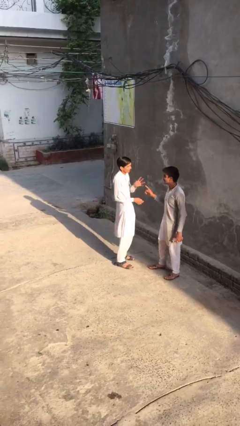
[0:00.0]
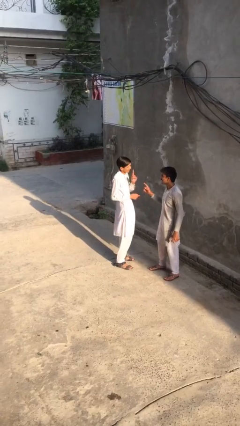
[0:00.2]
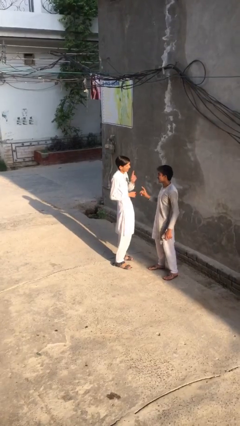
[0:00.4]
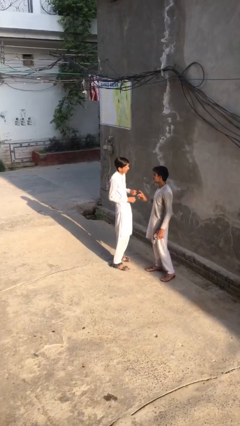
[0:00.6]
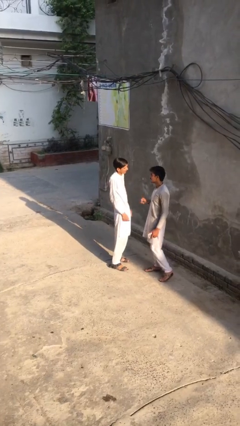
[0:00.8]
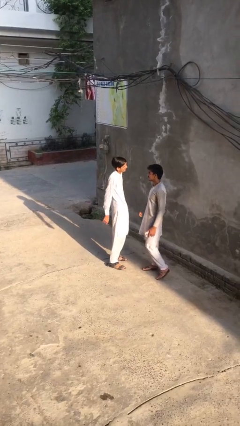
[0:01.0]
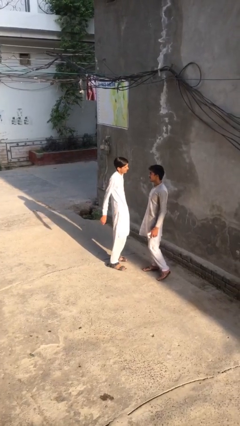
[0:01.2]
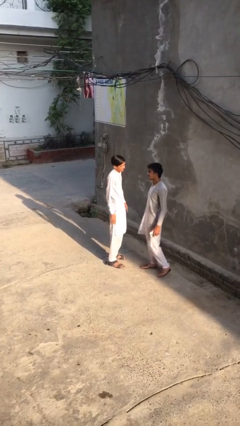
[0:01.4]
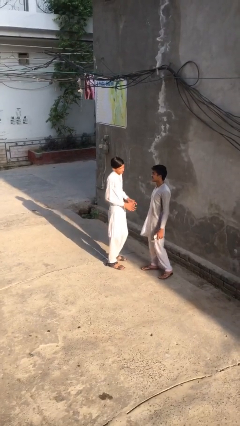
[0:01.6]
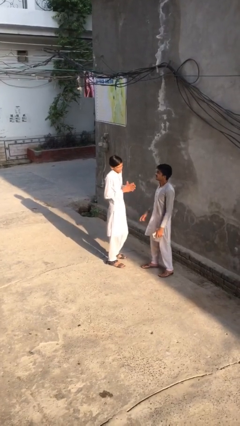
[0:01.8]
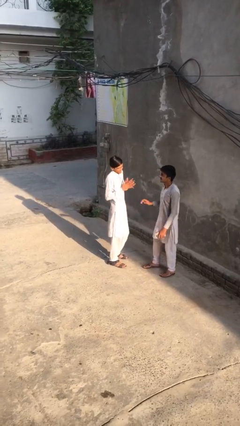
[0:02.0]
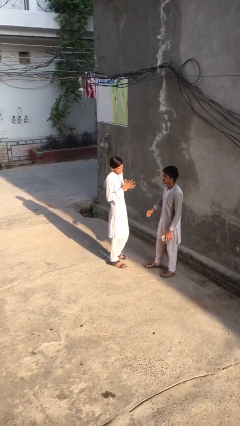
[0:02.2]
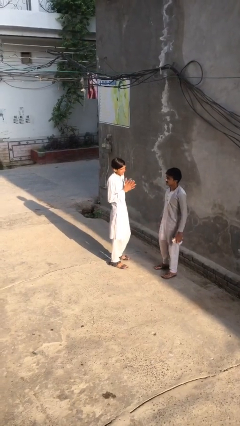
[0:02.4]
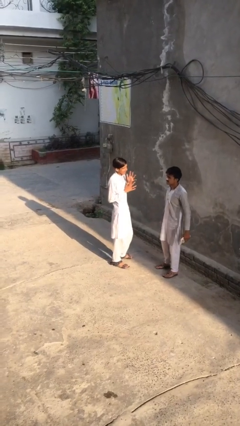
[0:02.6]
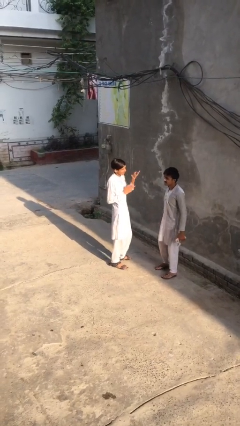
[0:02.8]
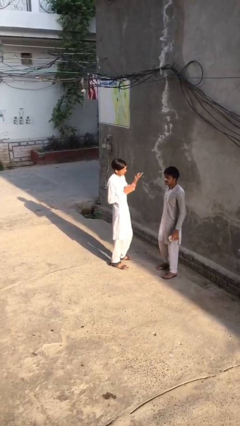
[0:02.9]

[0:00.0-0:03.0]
person talks to person

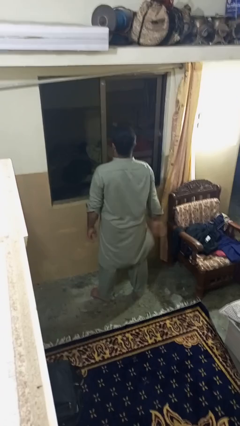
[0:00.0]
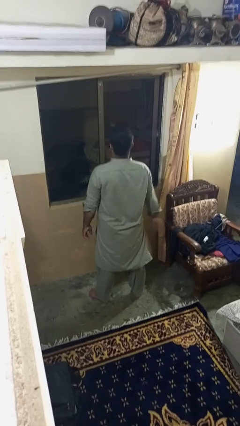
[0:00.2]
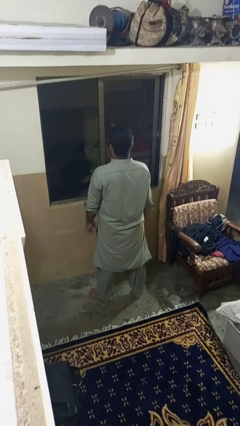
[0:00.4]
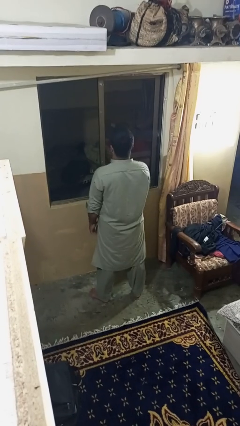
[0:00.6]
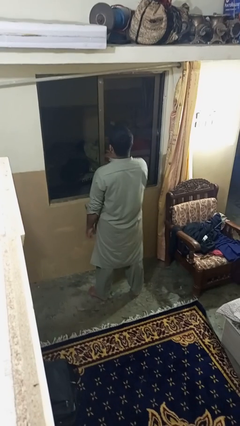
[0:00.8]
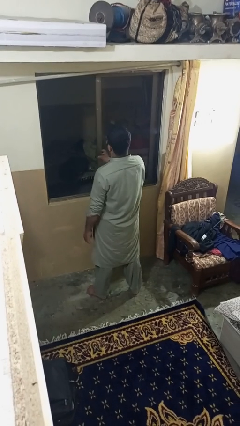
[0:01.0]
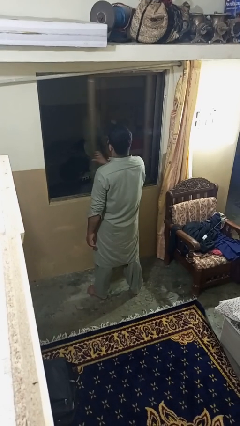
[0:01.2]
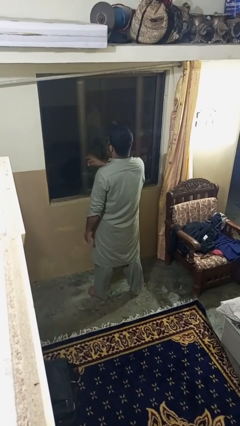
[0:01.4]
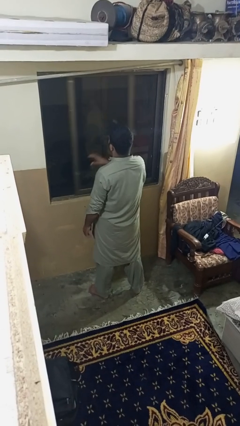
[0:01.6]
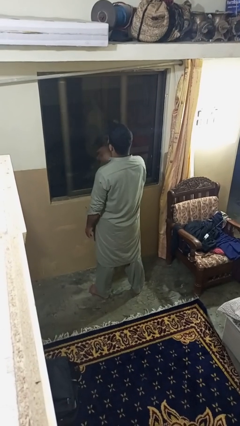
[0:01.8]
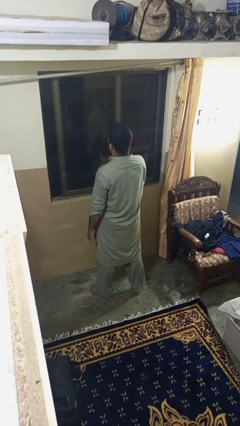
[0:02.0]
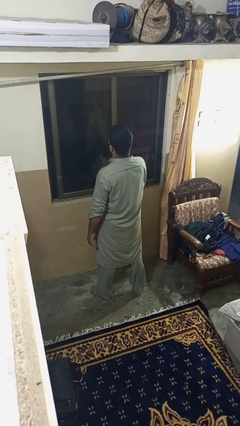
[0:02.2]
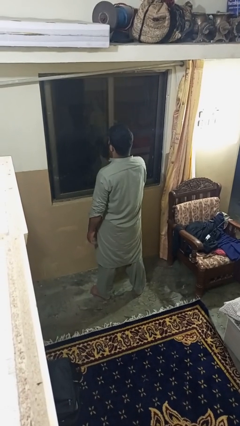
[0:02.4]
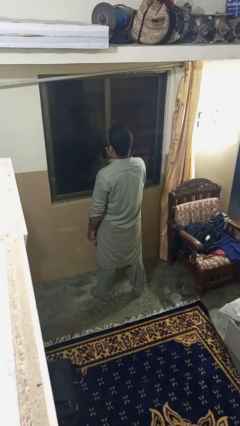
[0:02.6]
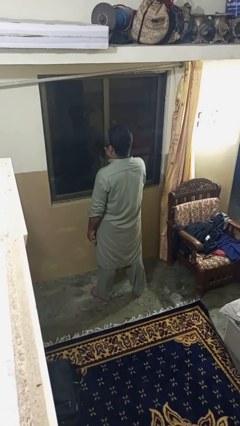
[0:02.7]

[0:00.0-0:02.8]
person closes home window

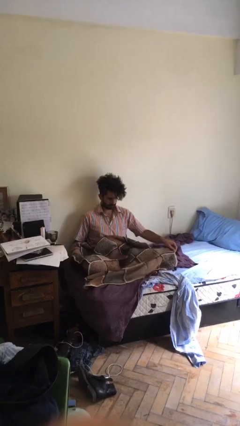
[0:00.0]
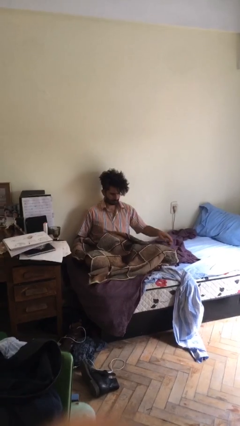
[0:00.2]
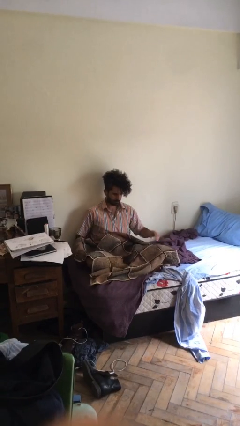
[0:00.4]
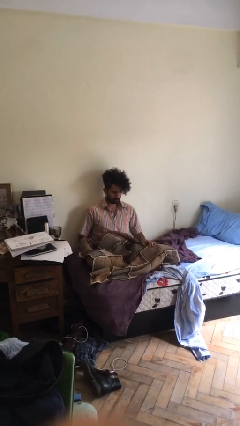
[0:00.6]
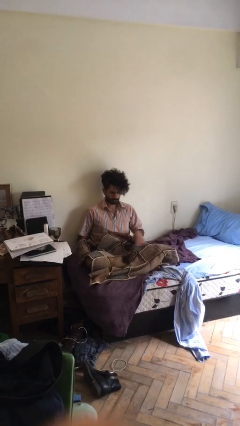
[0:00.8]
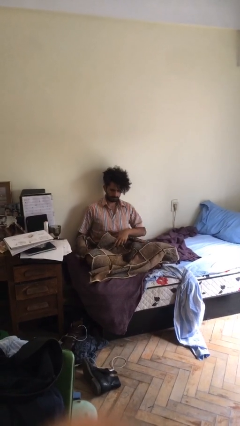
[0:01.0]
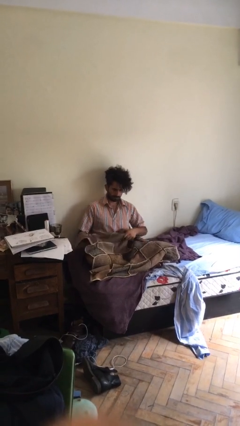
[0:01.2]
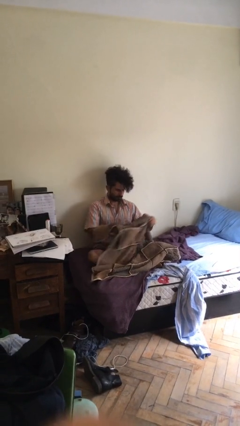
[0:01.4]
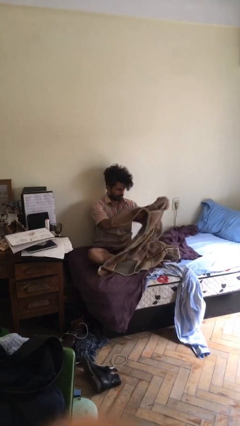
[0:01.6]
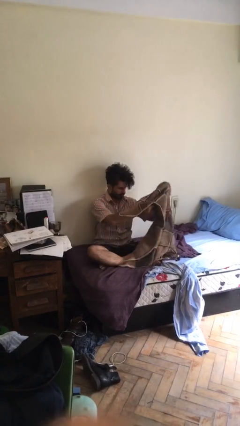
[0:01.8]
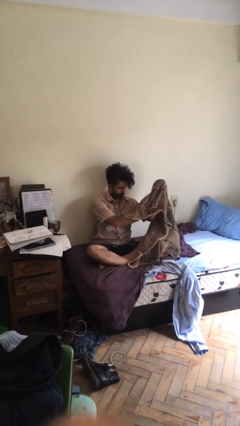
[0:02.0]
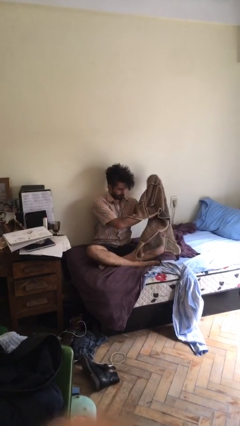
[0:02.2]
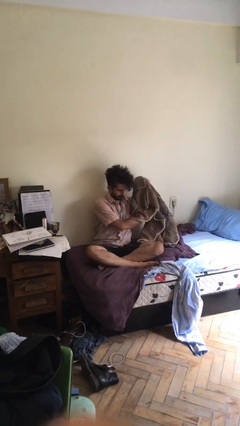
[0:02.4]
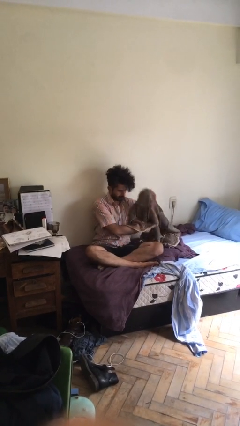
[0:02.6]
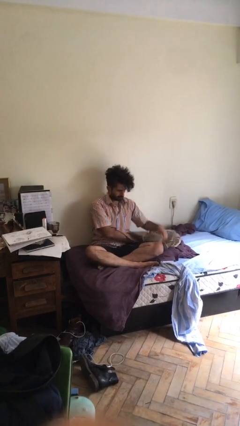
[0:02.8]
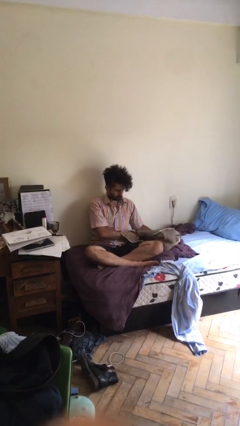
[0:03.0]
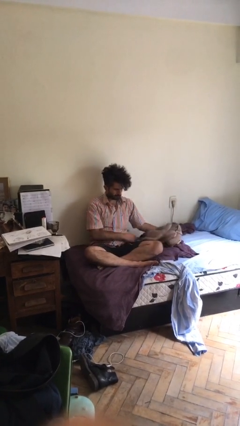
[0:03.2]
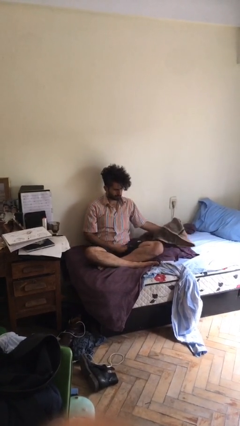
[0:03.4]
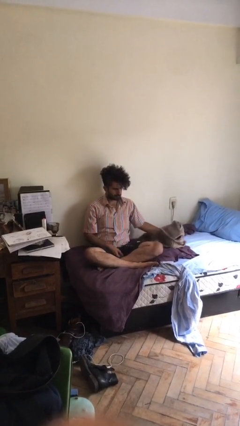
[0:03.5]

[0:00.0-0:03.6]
person uncovers with blanket

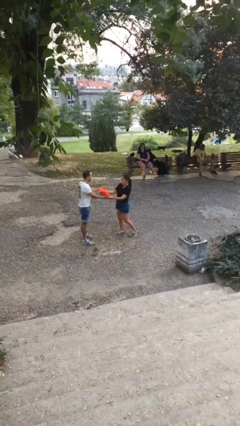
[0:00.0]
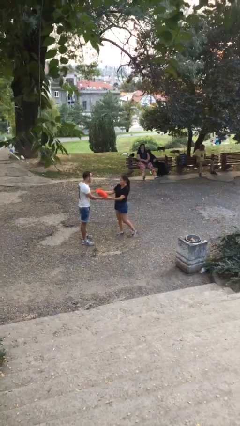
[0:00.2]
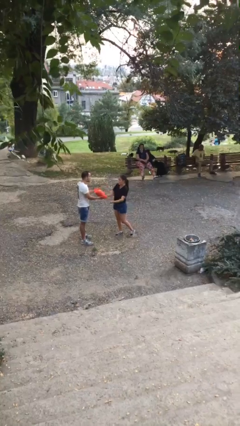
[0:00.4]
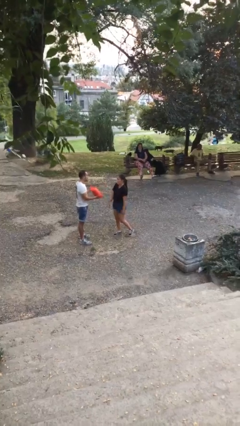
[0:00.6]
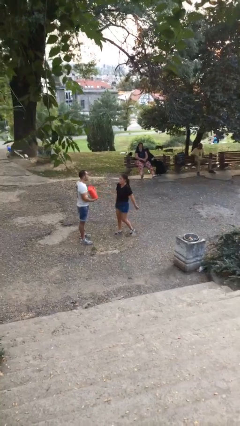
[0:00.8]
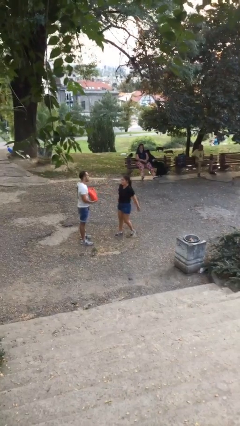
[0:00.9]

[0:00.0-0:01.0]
person transfers object to person

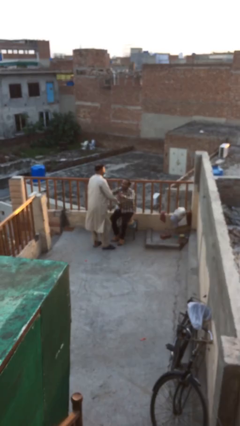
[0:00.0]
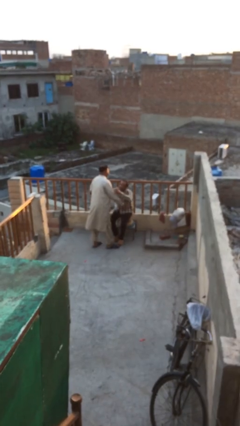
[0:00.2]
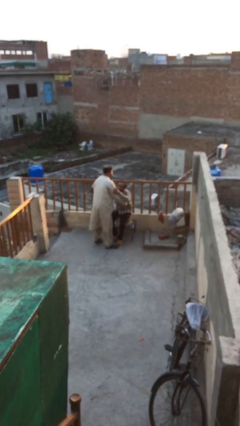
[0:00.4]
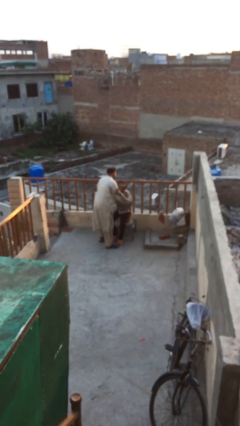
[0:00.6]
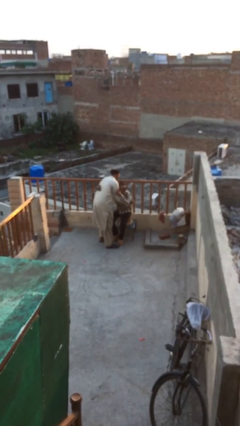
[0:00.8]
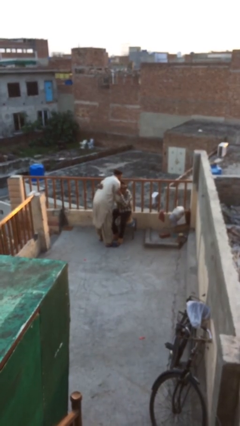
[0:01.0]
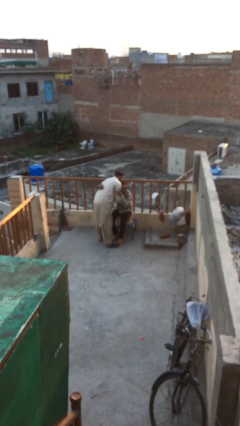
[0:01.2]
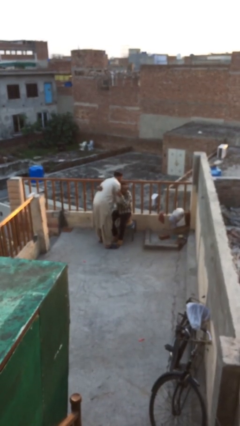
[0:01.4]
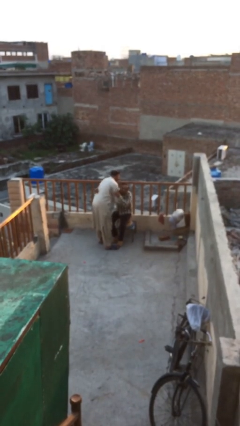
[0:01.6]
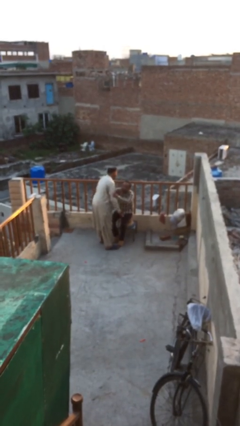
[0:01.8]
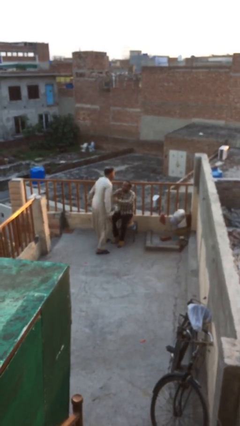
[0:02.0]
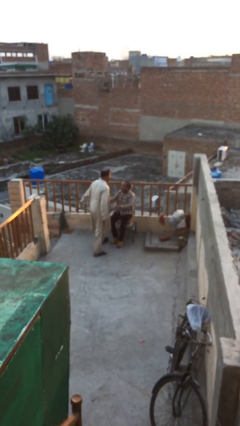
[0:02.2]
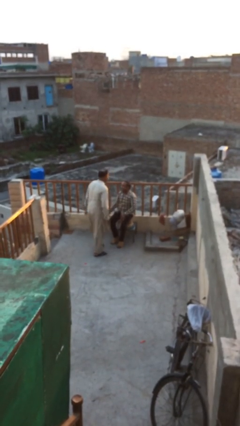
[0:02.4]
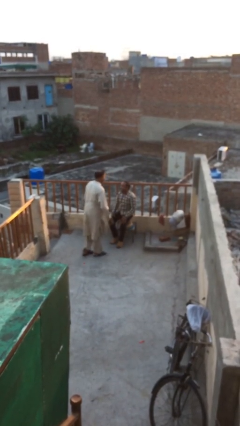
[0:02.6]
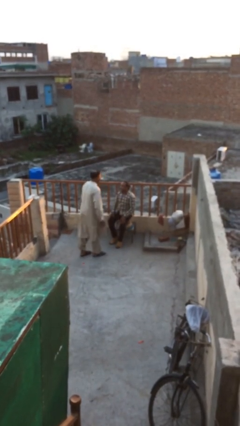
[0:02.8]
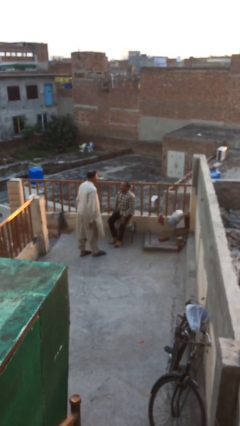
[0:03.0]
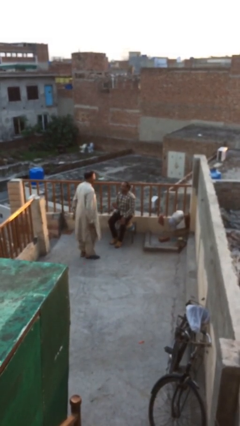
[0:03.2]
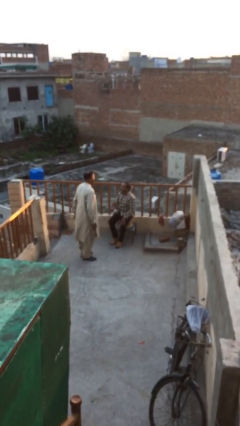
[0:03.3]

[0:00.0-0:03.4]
person embraces person

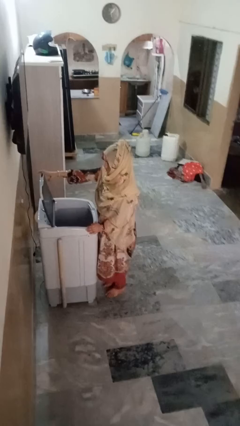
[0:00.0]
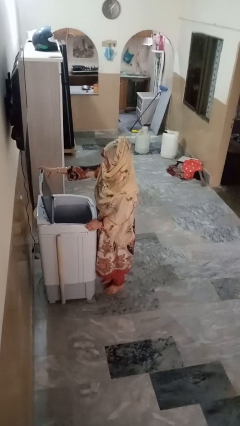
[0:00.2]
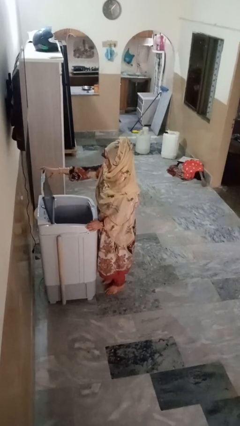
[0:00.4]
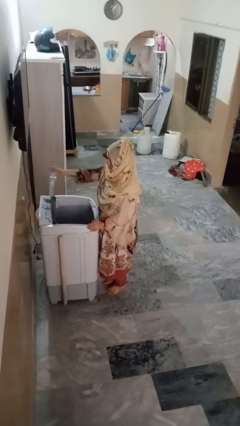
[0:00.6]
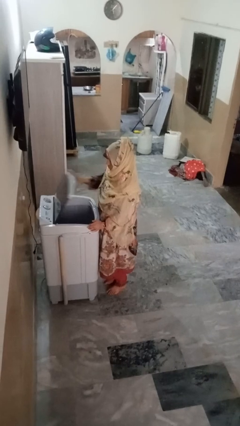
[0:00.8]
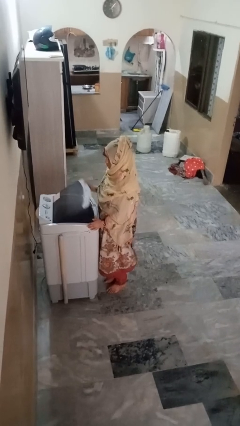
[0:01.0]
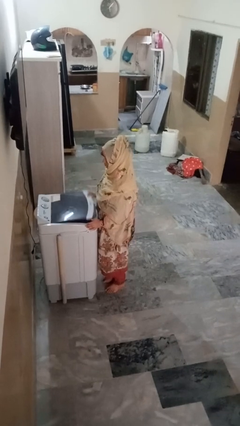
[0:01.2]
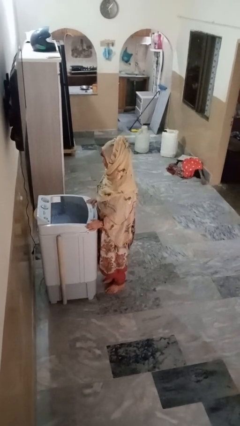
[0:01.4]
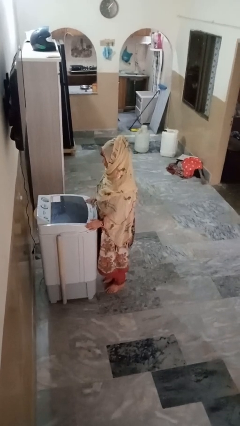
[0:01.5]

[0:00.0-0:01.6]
person closes clothes washer

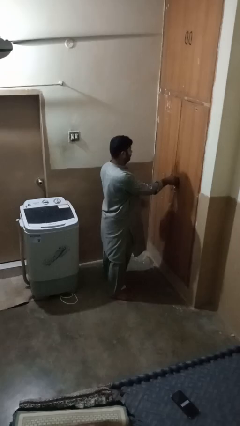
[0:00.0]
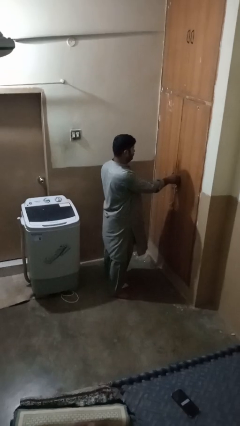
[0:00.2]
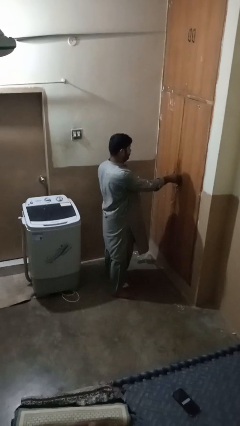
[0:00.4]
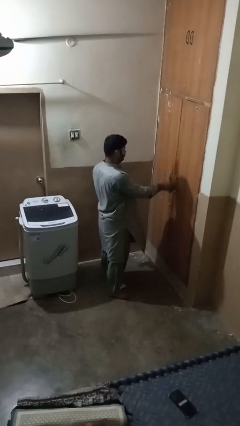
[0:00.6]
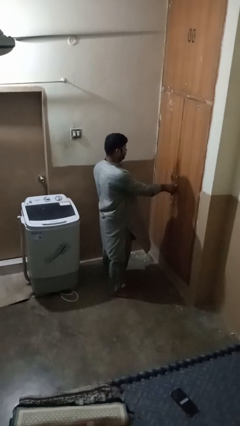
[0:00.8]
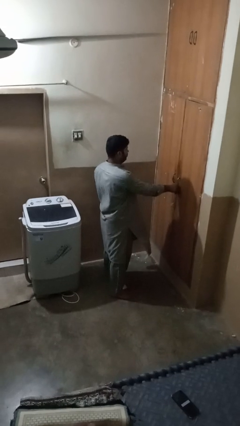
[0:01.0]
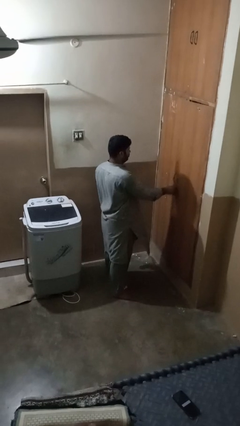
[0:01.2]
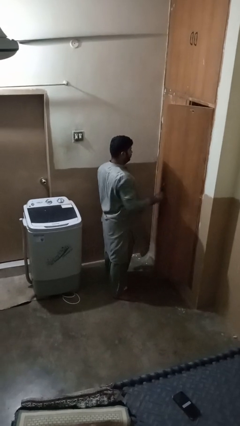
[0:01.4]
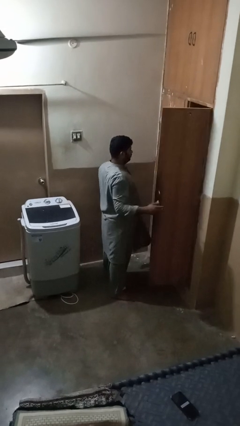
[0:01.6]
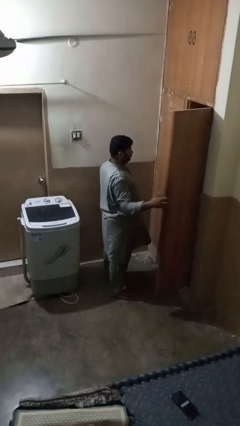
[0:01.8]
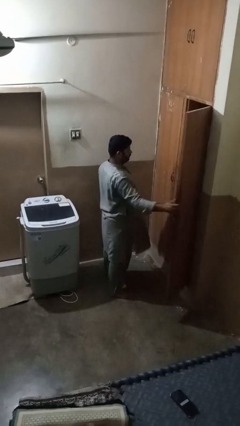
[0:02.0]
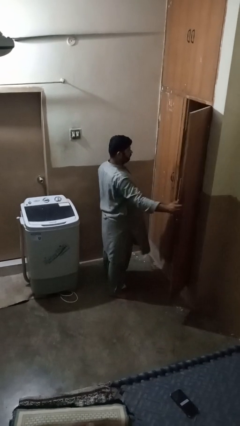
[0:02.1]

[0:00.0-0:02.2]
person opens closet door
